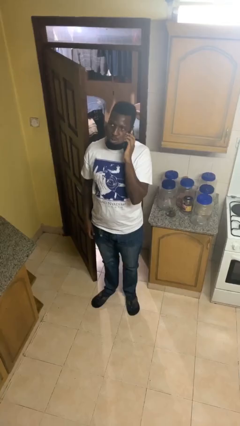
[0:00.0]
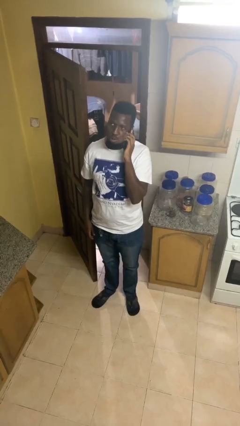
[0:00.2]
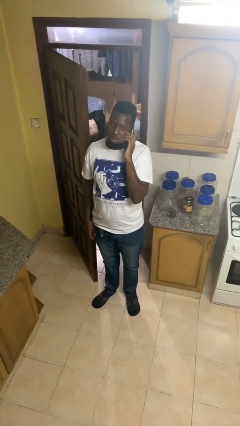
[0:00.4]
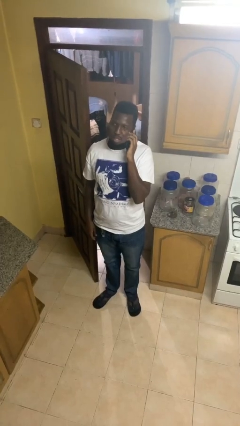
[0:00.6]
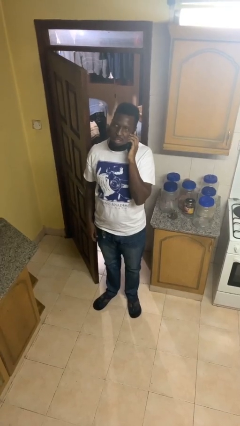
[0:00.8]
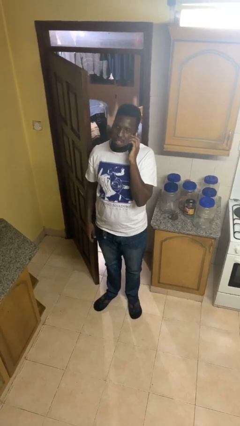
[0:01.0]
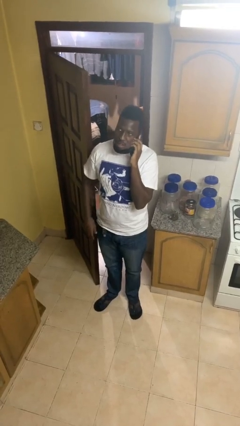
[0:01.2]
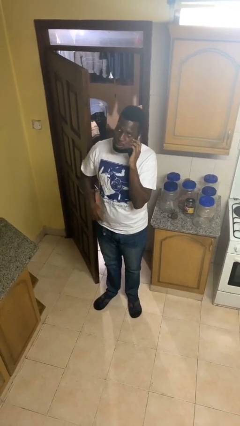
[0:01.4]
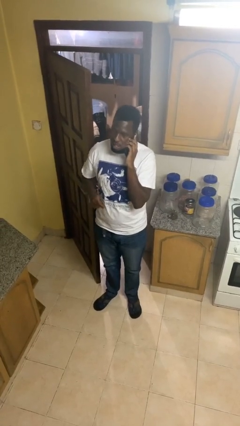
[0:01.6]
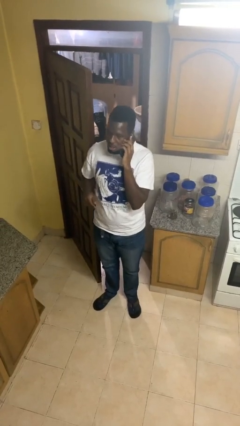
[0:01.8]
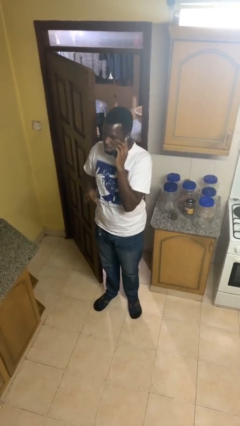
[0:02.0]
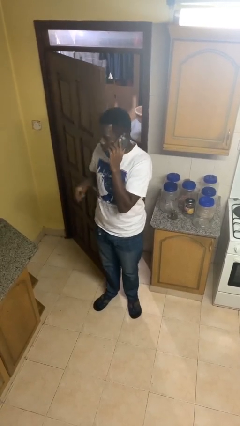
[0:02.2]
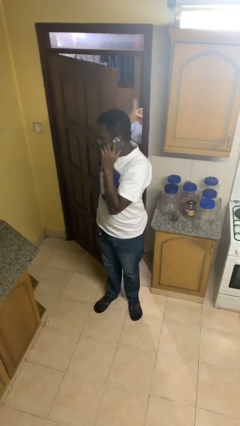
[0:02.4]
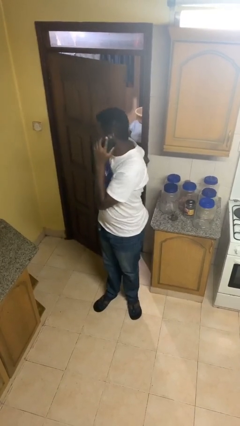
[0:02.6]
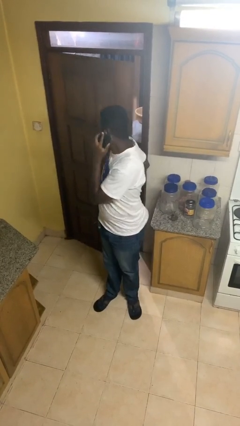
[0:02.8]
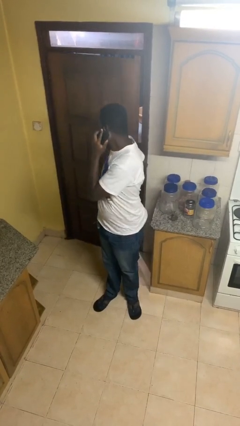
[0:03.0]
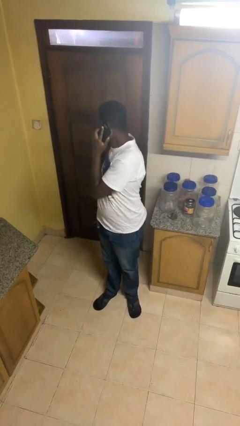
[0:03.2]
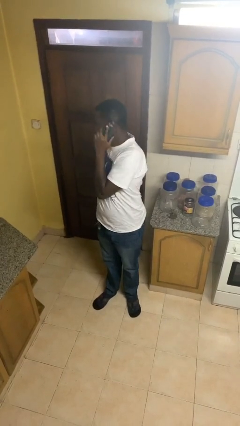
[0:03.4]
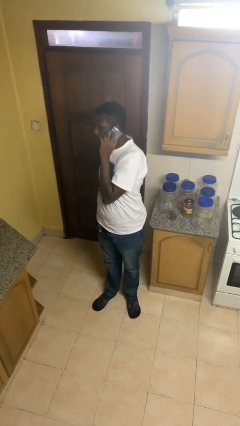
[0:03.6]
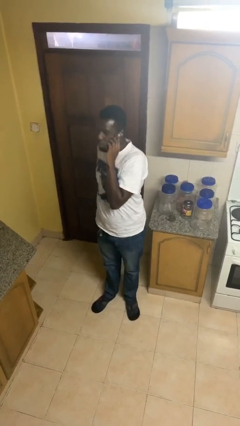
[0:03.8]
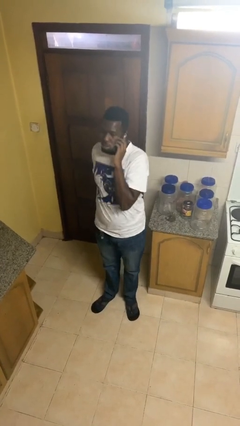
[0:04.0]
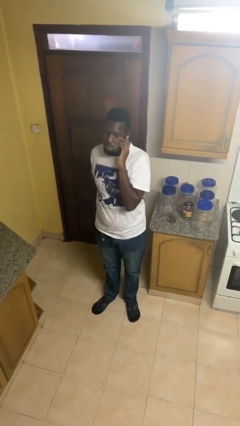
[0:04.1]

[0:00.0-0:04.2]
person closes facility door

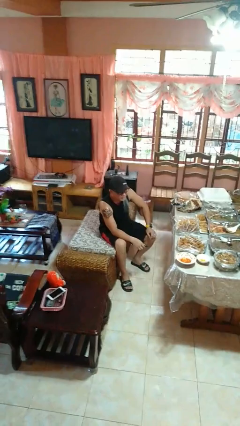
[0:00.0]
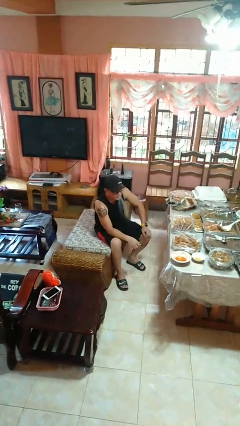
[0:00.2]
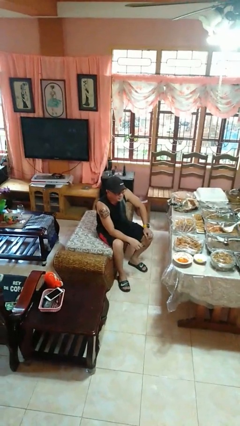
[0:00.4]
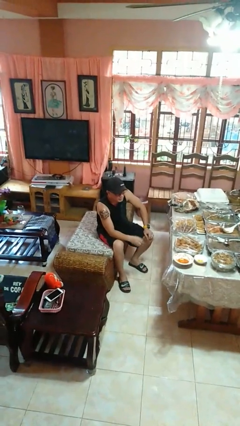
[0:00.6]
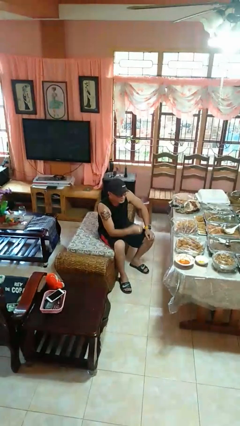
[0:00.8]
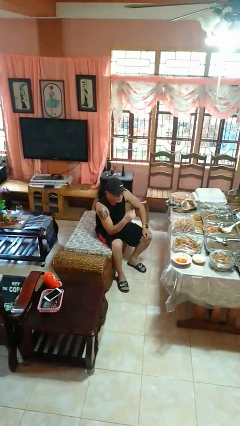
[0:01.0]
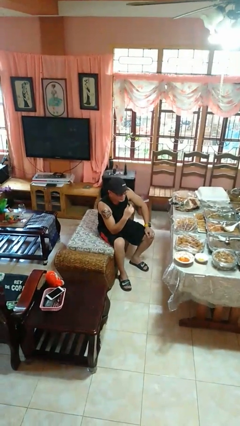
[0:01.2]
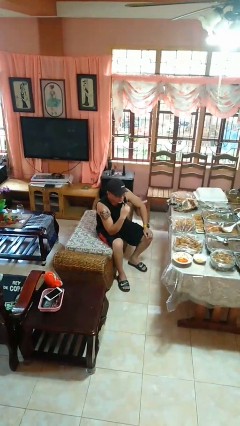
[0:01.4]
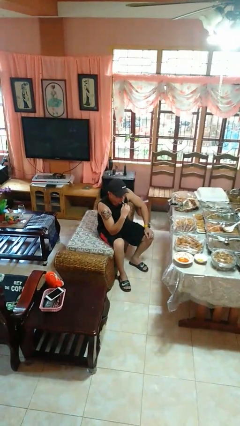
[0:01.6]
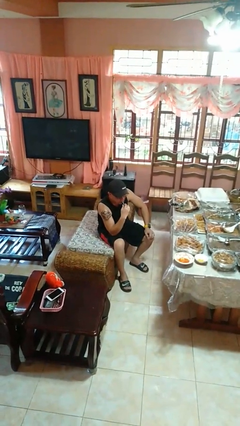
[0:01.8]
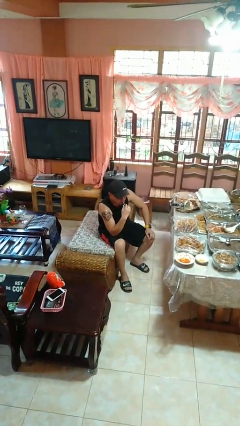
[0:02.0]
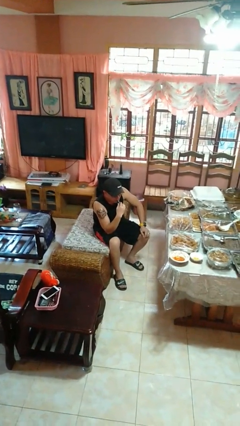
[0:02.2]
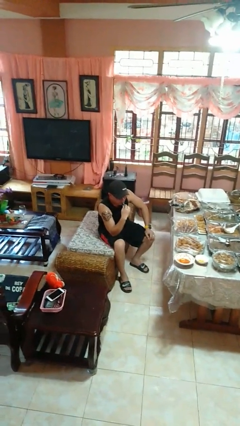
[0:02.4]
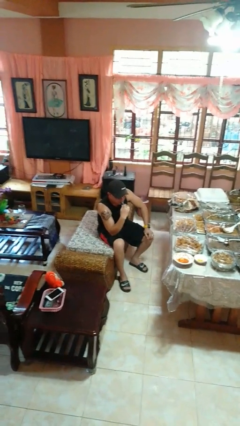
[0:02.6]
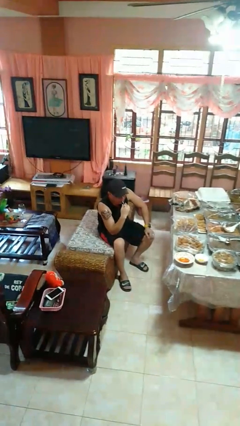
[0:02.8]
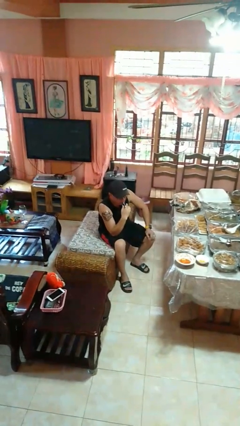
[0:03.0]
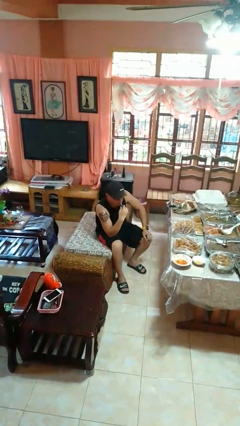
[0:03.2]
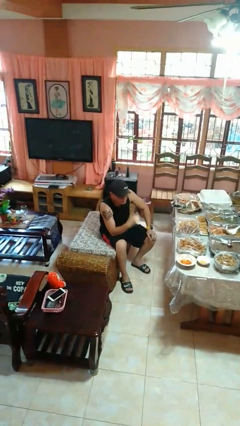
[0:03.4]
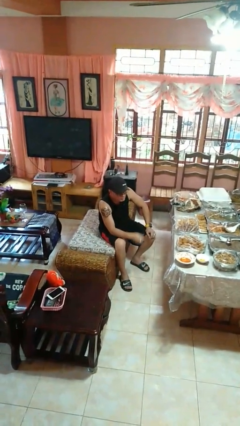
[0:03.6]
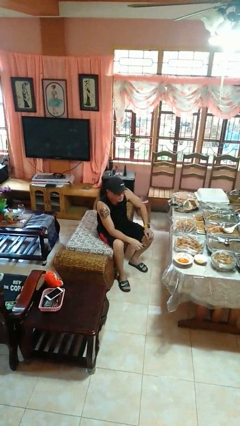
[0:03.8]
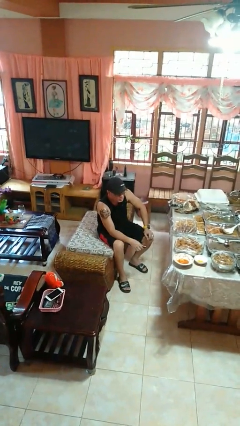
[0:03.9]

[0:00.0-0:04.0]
person vapes

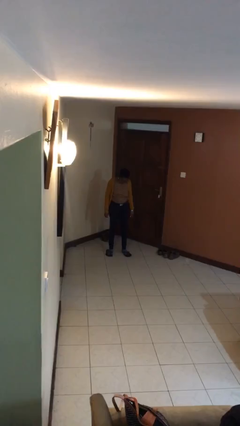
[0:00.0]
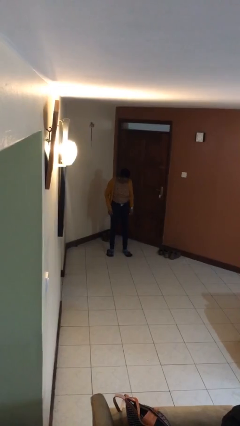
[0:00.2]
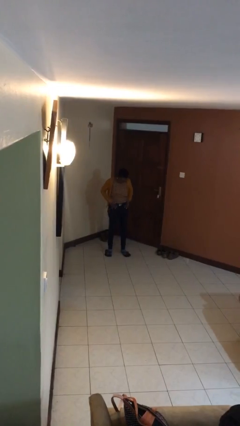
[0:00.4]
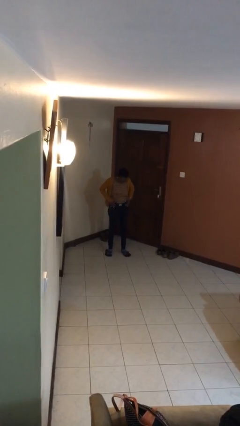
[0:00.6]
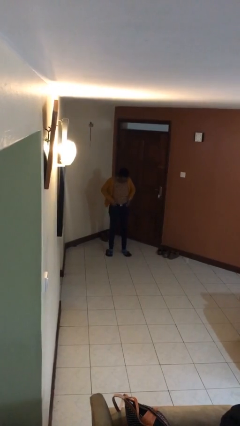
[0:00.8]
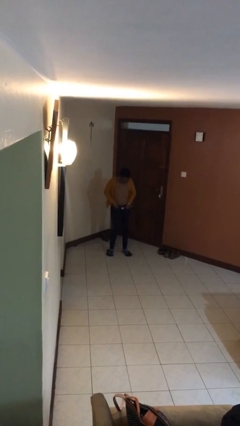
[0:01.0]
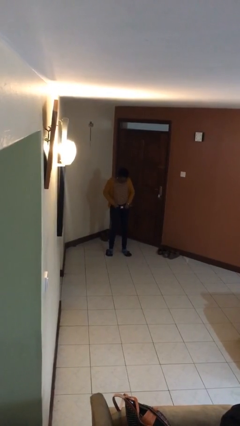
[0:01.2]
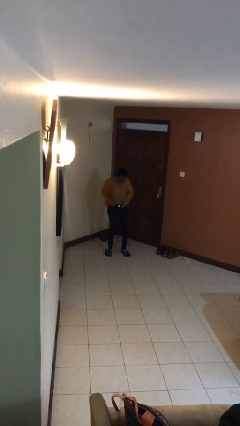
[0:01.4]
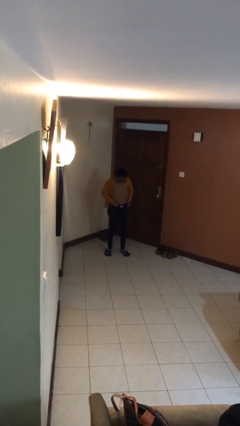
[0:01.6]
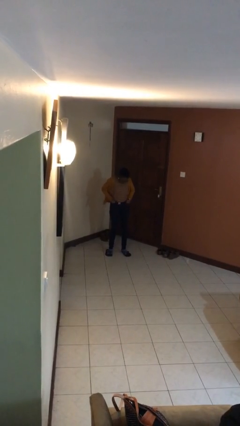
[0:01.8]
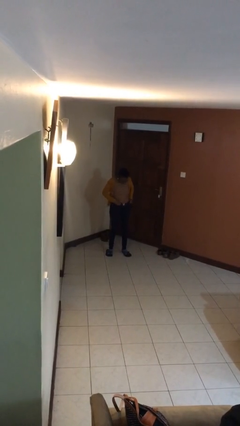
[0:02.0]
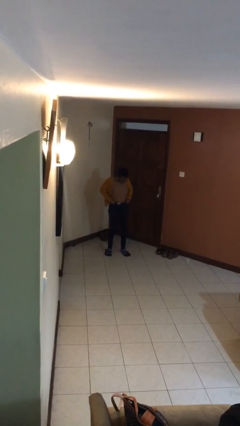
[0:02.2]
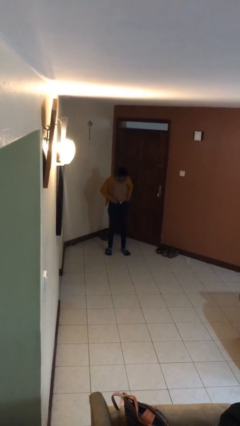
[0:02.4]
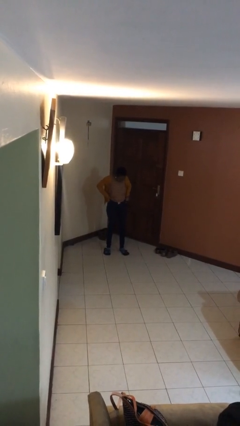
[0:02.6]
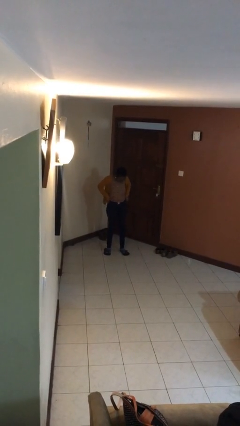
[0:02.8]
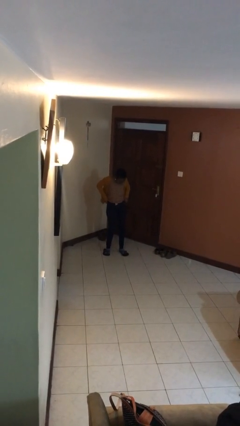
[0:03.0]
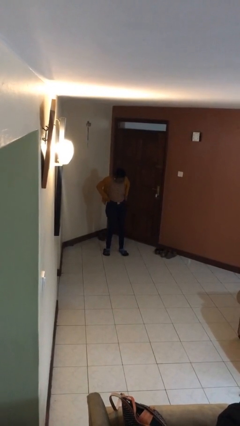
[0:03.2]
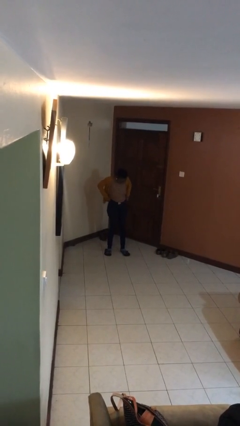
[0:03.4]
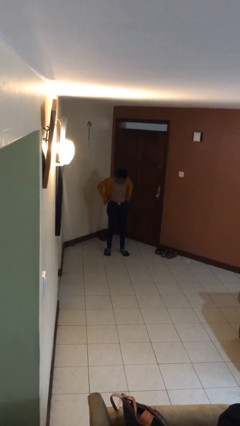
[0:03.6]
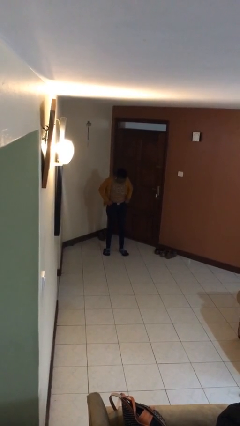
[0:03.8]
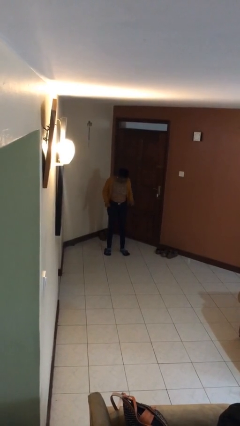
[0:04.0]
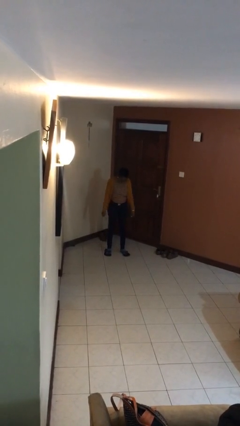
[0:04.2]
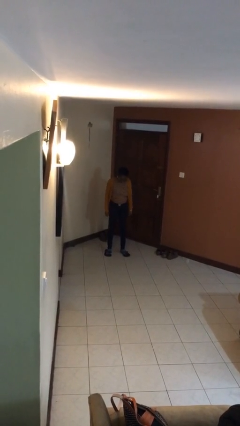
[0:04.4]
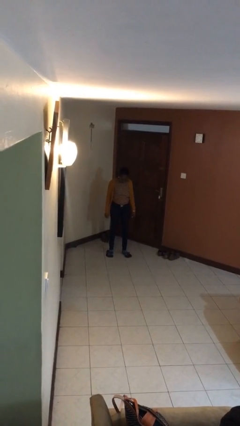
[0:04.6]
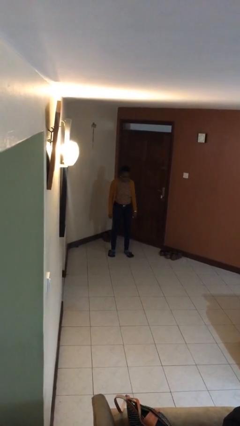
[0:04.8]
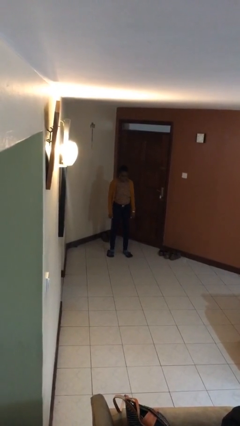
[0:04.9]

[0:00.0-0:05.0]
person hikes up pants

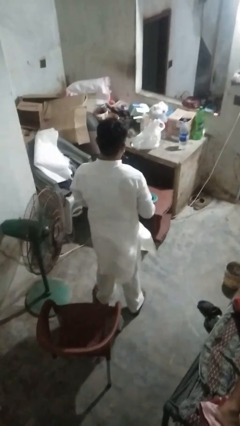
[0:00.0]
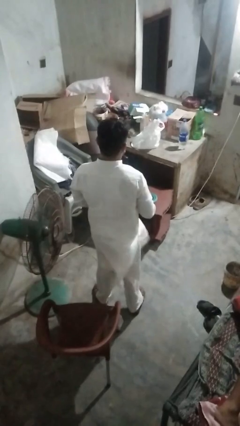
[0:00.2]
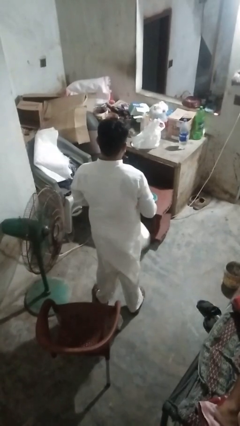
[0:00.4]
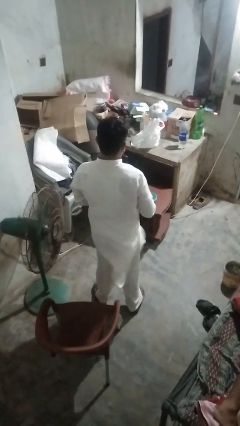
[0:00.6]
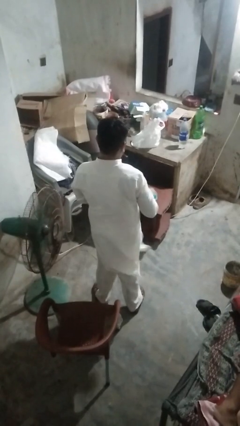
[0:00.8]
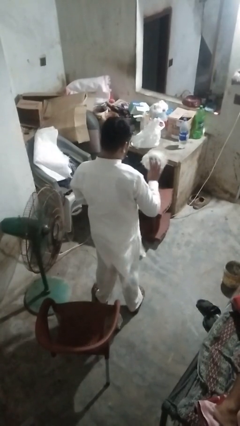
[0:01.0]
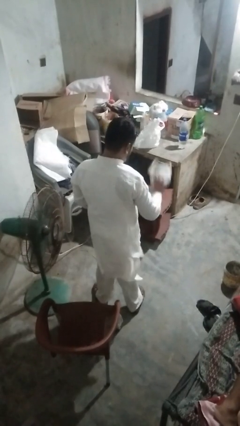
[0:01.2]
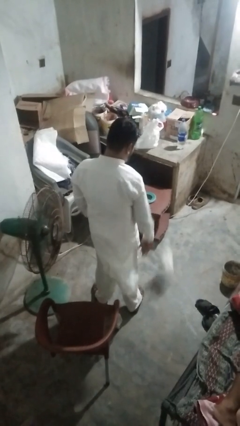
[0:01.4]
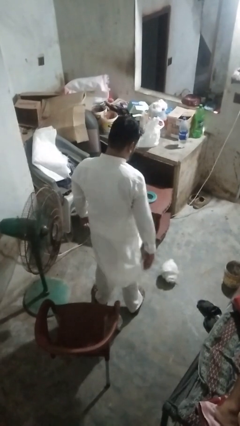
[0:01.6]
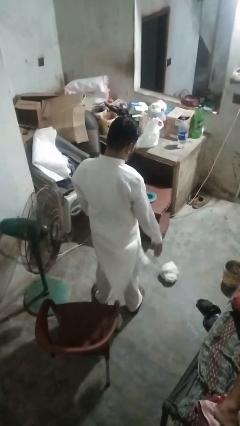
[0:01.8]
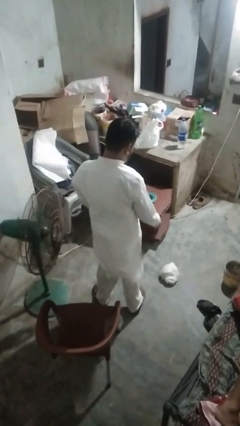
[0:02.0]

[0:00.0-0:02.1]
person throws object to ground

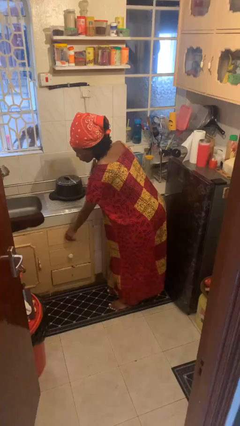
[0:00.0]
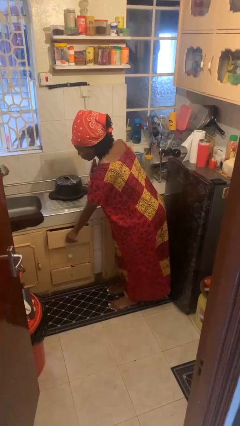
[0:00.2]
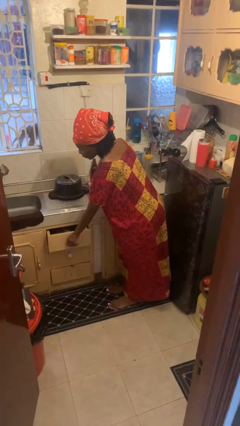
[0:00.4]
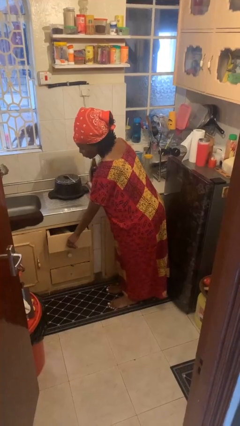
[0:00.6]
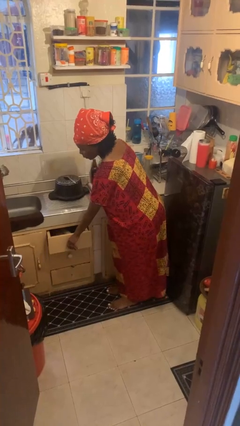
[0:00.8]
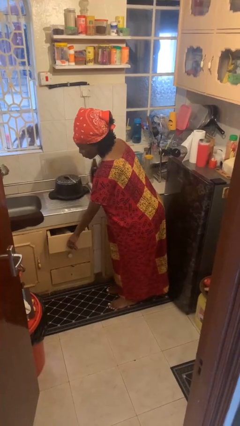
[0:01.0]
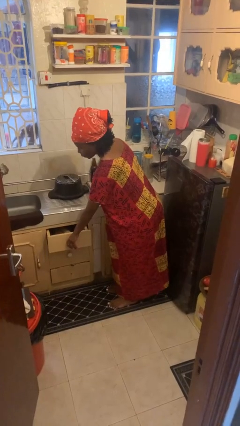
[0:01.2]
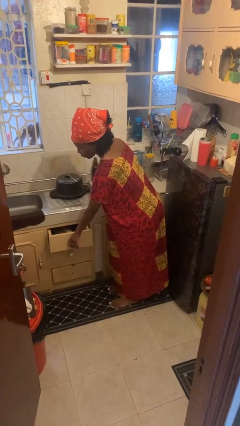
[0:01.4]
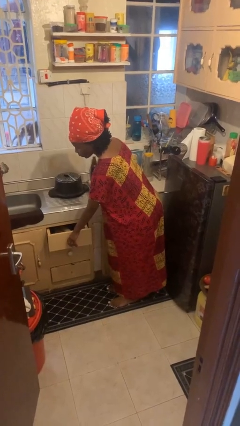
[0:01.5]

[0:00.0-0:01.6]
person opens kitchen drawer

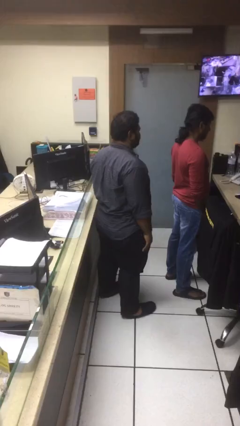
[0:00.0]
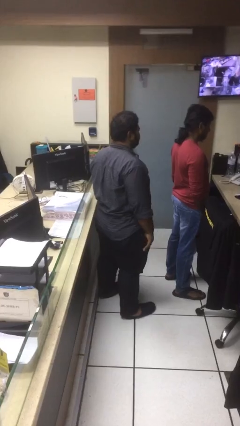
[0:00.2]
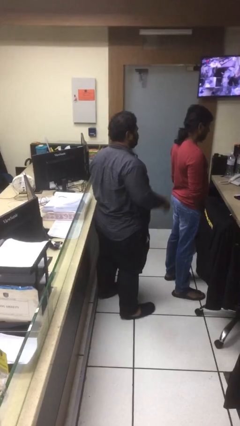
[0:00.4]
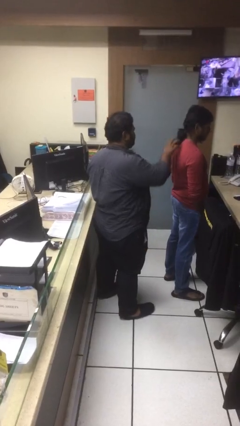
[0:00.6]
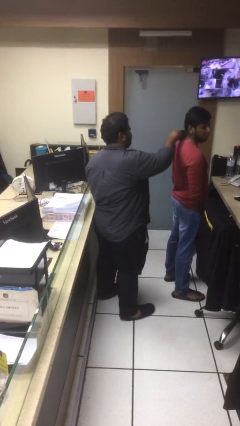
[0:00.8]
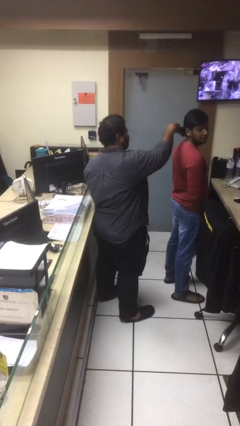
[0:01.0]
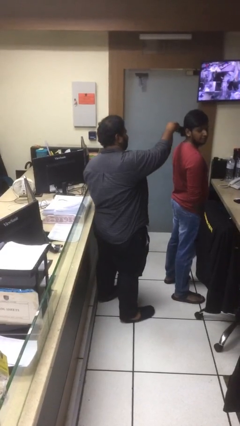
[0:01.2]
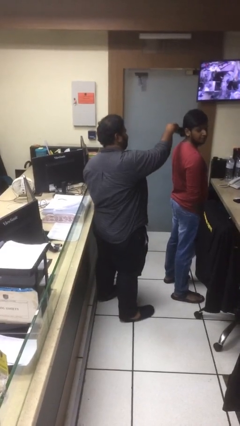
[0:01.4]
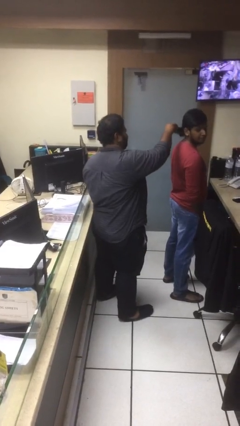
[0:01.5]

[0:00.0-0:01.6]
person grabs person by hair
